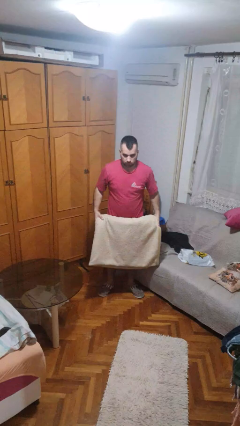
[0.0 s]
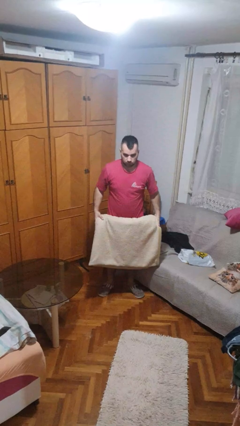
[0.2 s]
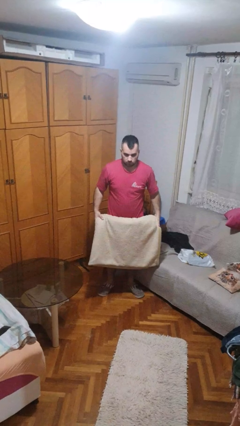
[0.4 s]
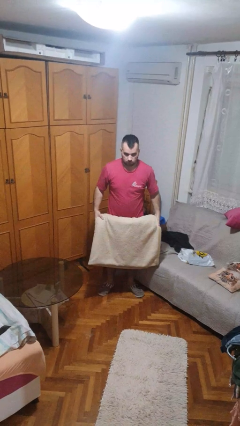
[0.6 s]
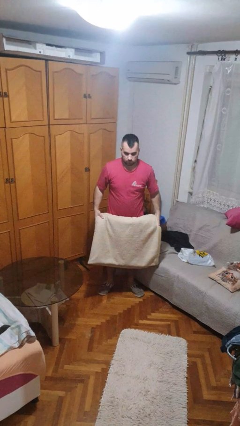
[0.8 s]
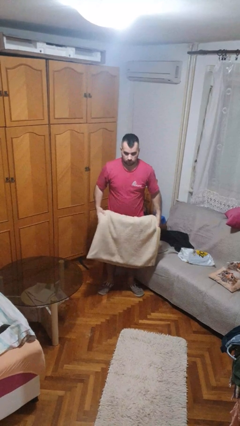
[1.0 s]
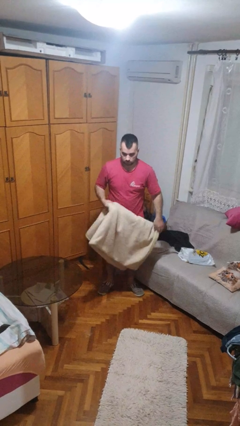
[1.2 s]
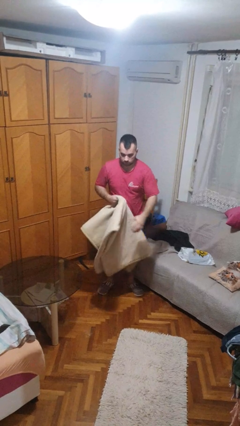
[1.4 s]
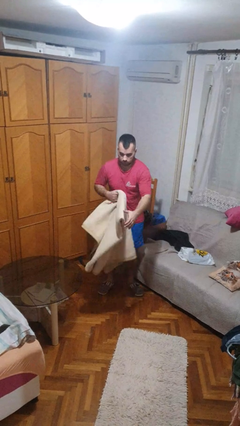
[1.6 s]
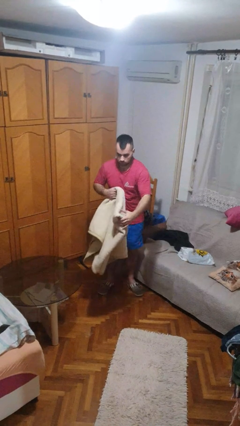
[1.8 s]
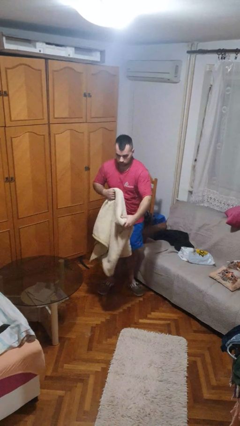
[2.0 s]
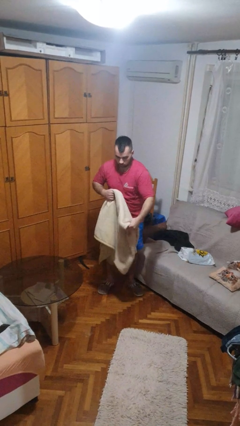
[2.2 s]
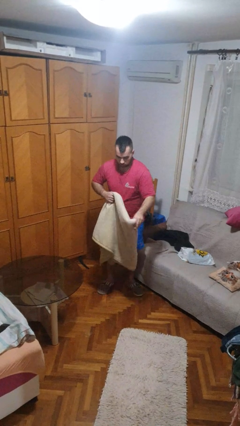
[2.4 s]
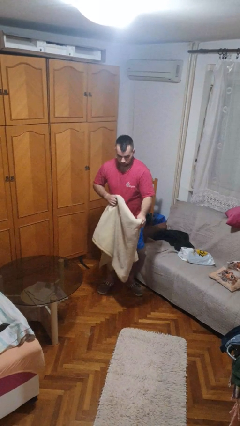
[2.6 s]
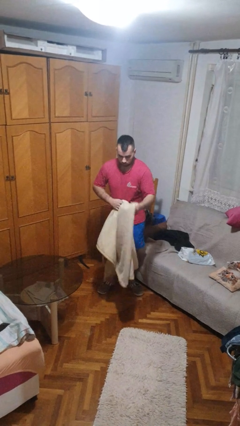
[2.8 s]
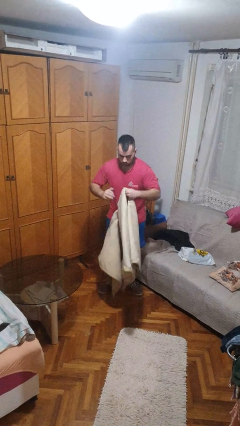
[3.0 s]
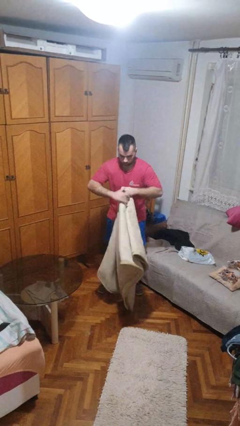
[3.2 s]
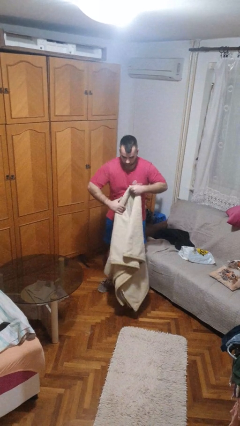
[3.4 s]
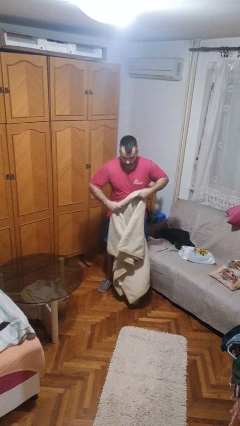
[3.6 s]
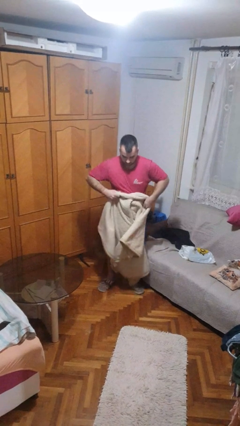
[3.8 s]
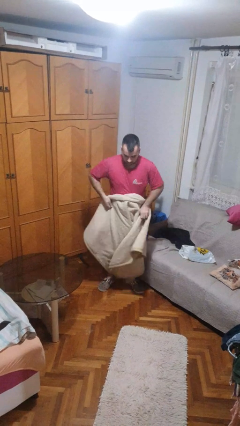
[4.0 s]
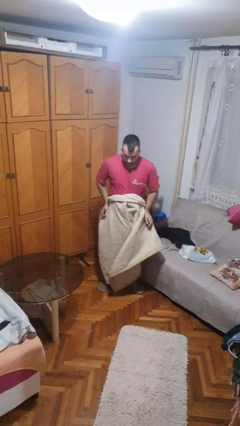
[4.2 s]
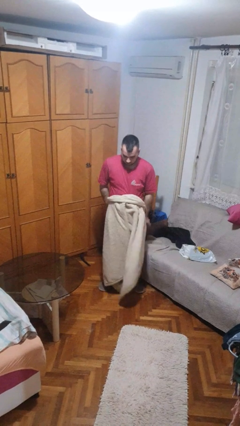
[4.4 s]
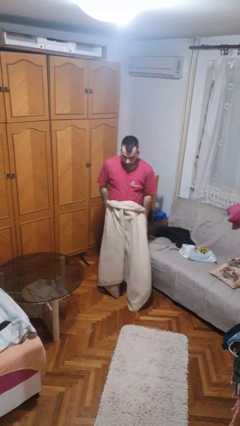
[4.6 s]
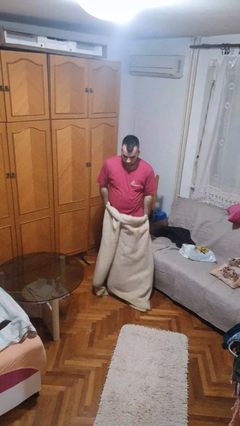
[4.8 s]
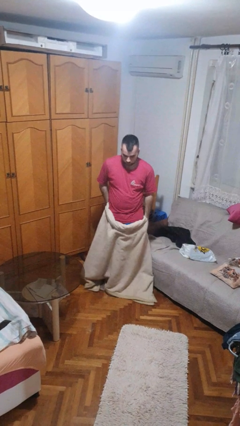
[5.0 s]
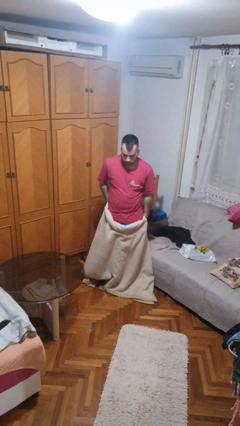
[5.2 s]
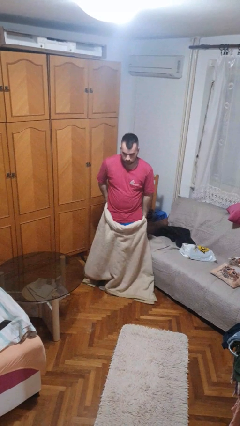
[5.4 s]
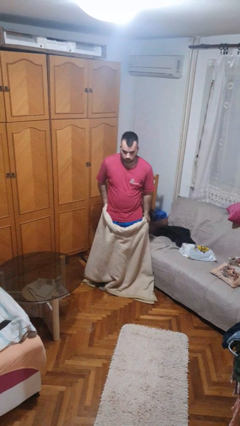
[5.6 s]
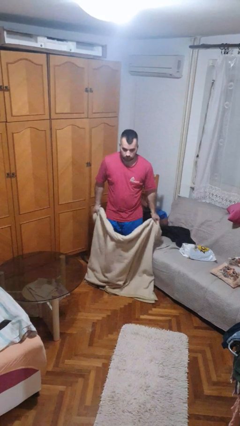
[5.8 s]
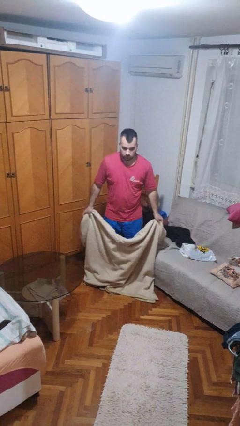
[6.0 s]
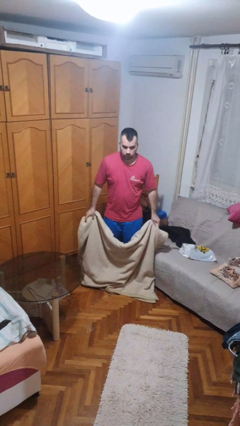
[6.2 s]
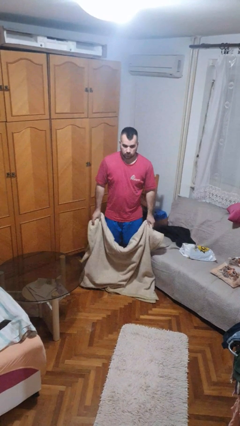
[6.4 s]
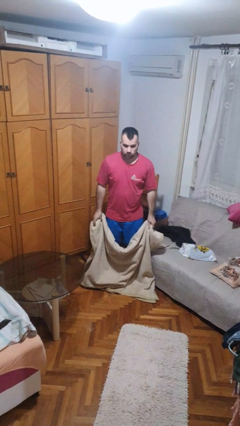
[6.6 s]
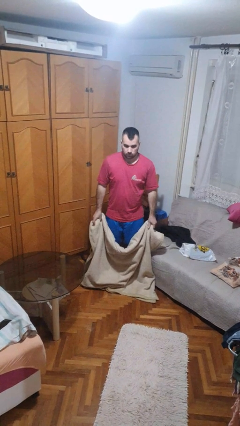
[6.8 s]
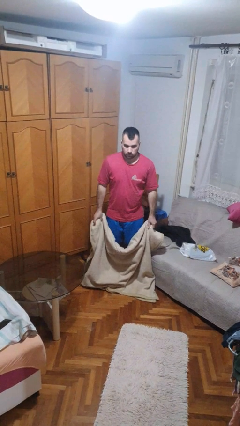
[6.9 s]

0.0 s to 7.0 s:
person unfolds blanket

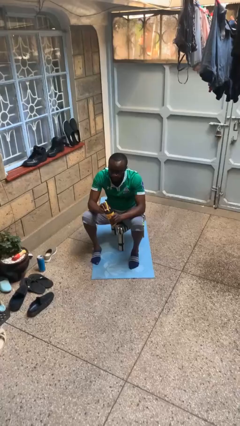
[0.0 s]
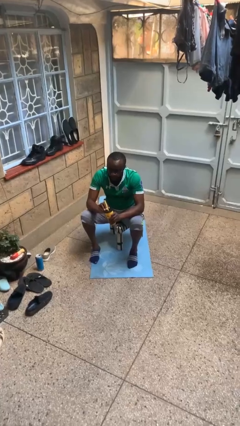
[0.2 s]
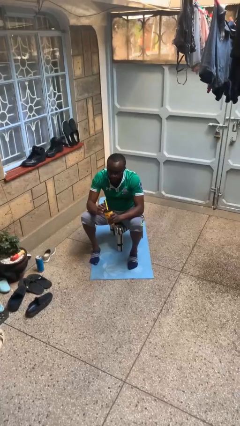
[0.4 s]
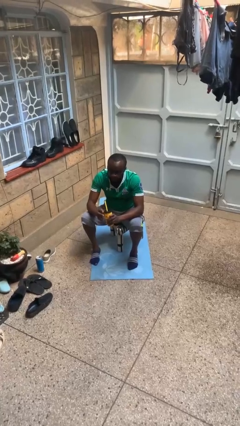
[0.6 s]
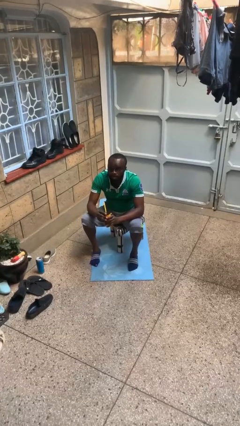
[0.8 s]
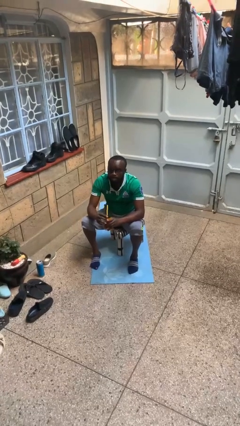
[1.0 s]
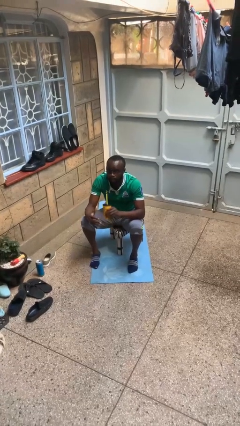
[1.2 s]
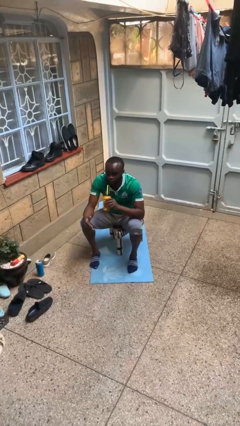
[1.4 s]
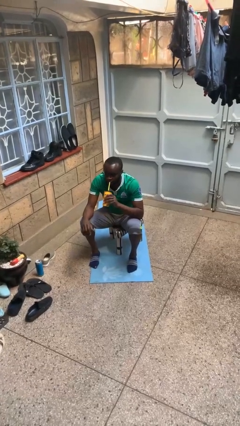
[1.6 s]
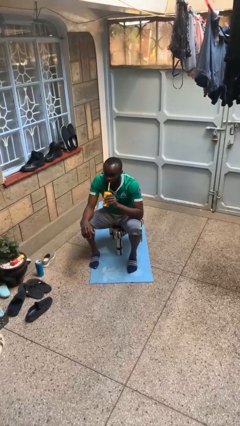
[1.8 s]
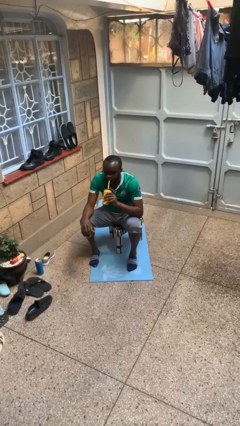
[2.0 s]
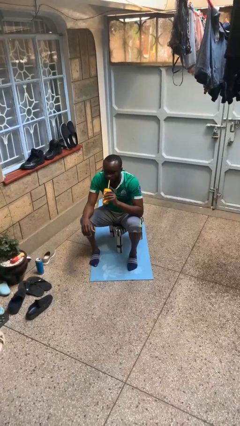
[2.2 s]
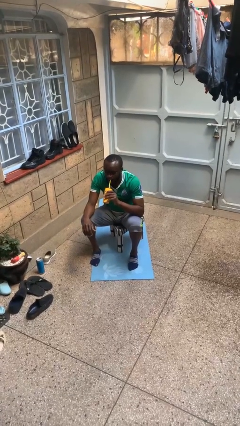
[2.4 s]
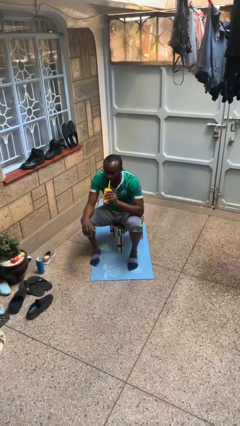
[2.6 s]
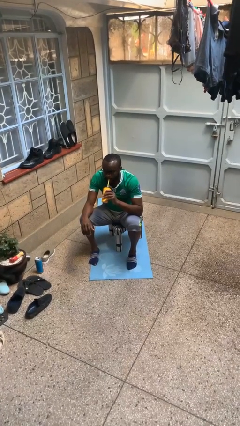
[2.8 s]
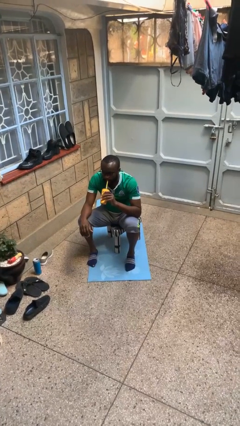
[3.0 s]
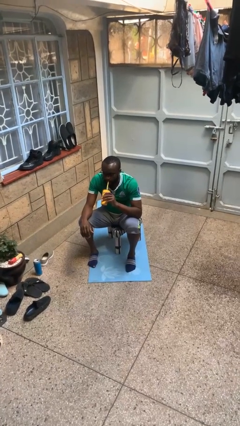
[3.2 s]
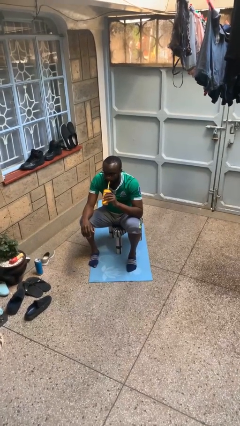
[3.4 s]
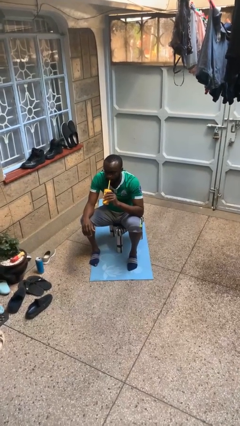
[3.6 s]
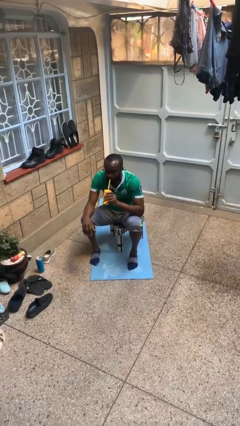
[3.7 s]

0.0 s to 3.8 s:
person drinks from straw

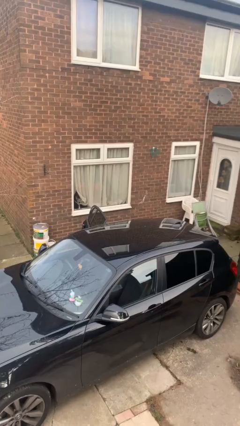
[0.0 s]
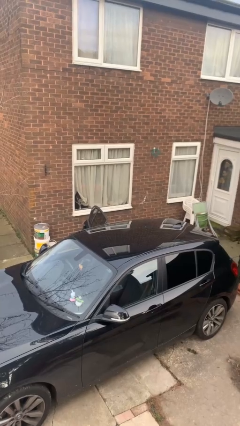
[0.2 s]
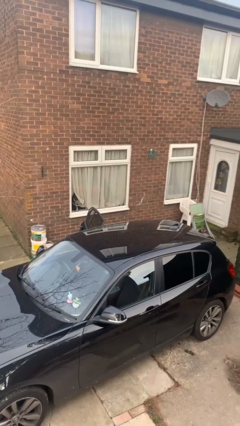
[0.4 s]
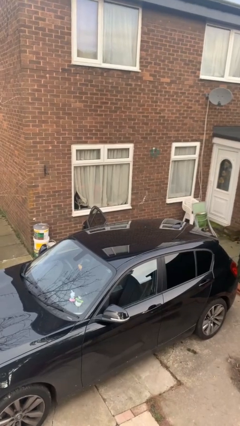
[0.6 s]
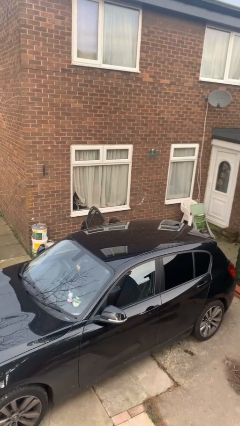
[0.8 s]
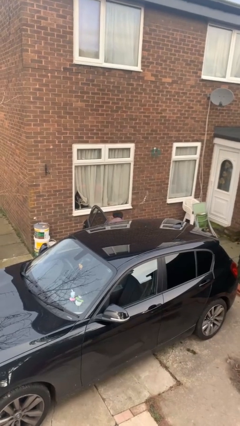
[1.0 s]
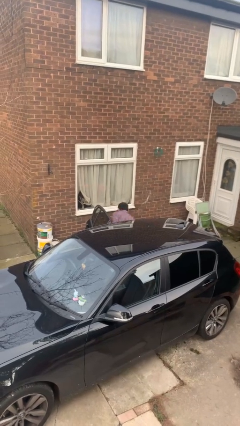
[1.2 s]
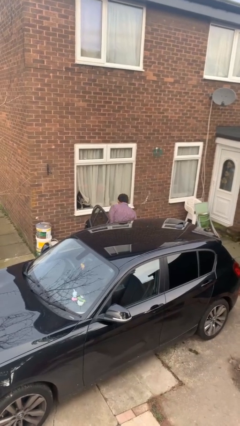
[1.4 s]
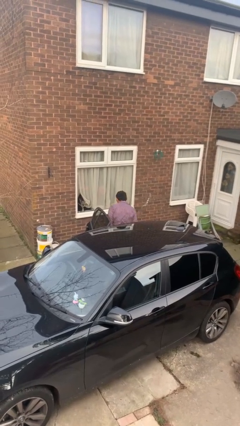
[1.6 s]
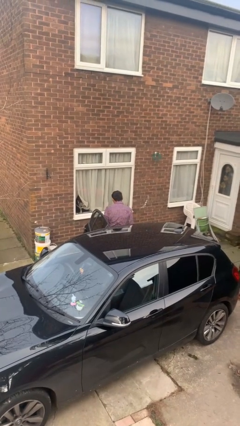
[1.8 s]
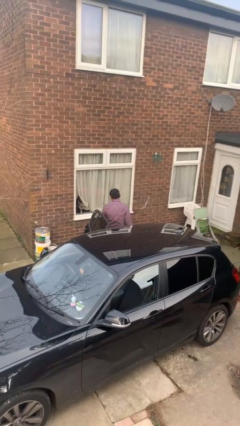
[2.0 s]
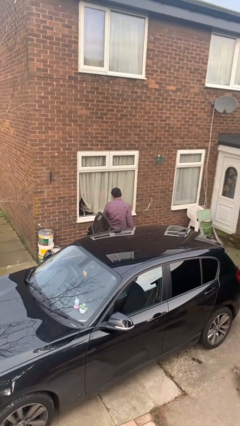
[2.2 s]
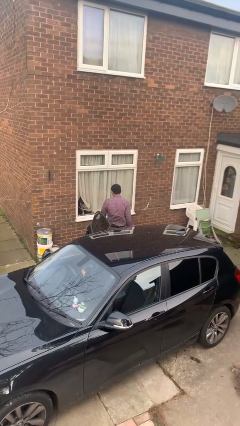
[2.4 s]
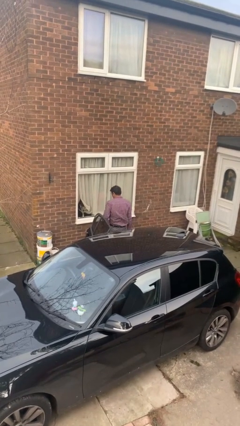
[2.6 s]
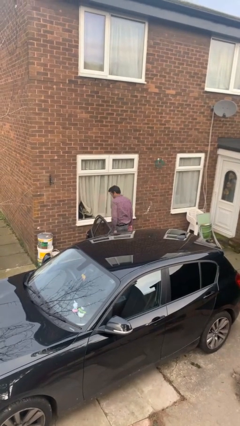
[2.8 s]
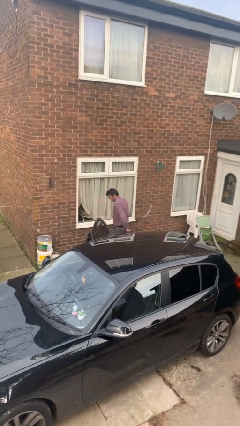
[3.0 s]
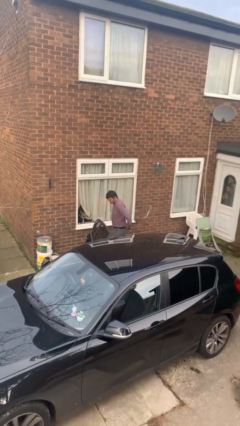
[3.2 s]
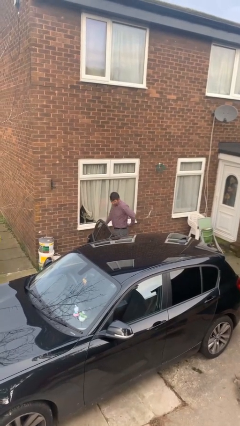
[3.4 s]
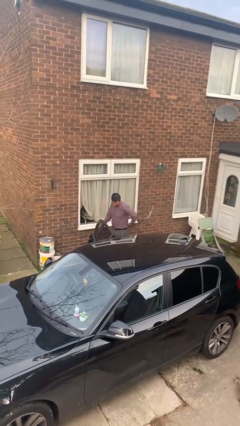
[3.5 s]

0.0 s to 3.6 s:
person exits car

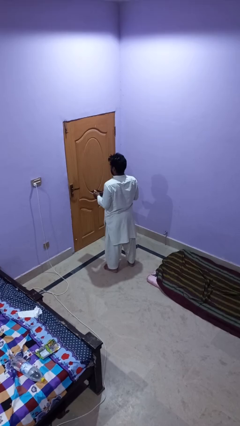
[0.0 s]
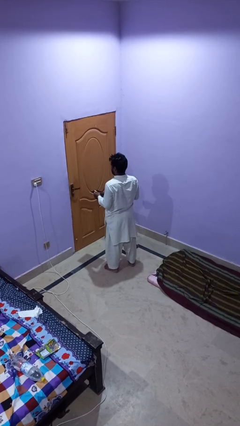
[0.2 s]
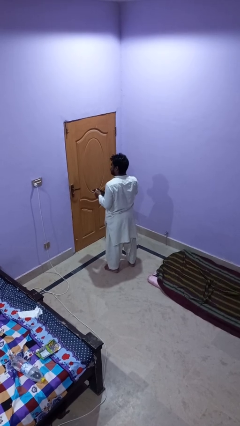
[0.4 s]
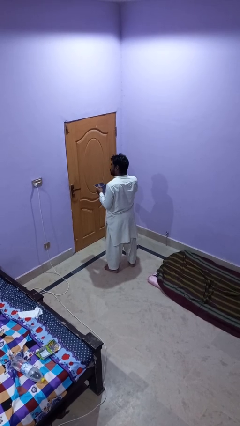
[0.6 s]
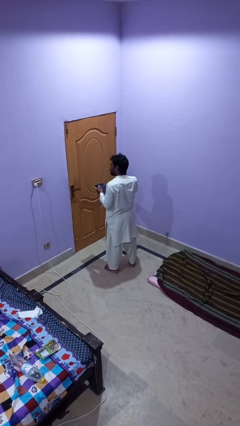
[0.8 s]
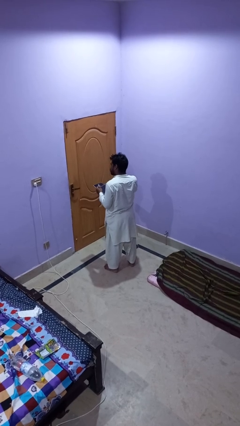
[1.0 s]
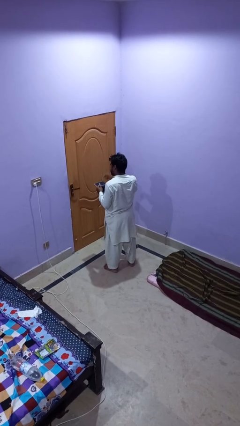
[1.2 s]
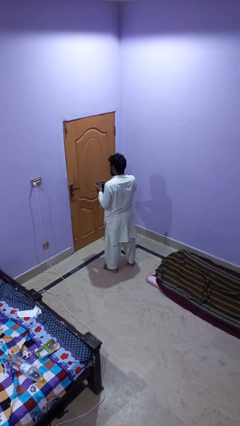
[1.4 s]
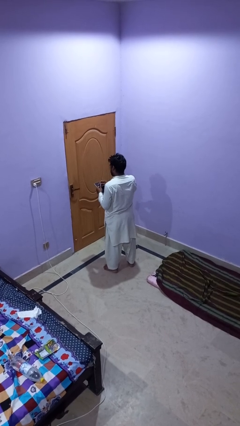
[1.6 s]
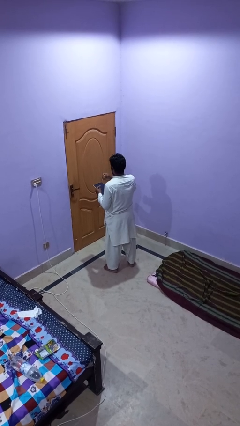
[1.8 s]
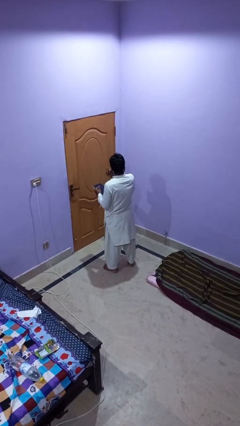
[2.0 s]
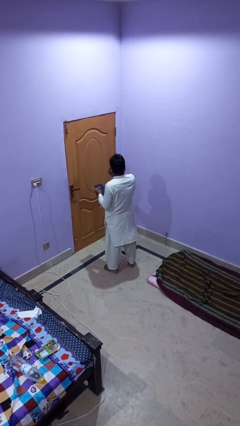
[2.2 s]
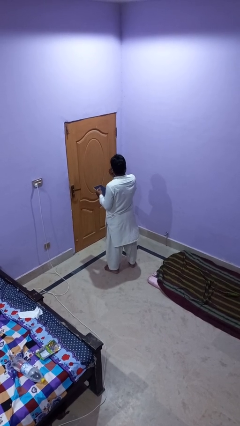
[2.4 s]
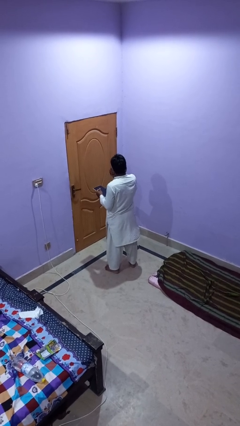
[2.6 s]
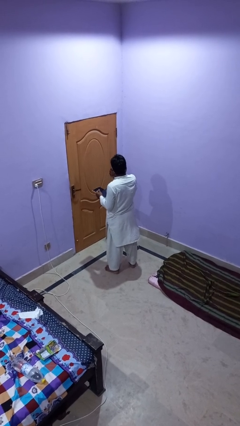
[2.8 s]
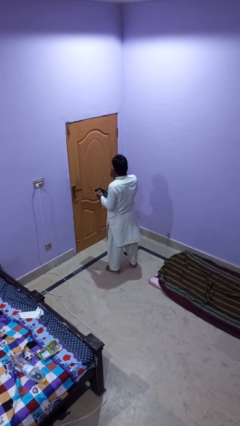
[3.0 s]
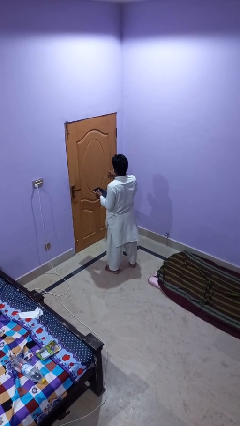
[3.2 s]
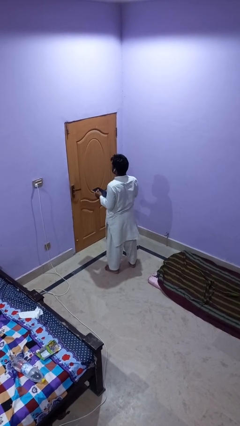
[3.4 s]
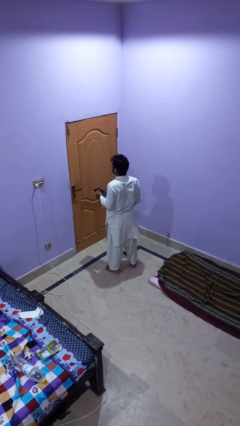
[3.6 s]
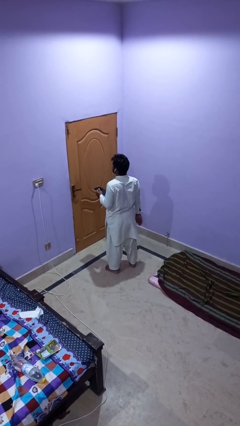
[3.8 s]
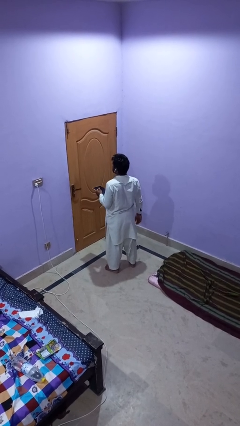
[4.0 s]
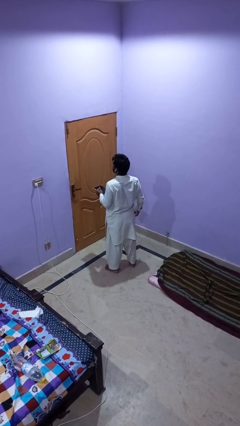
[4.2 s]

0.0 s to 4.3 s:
person puts on headphones
